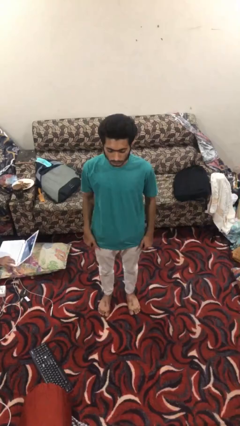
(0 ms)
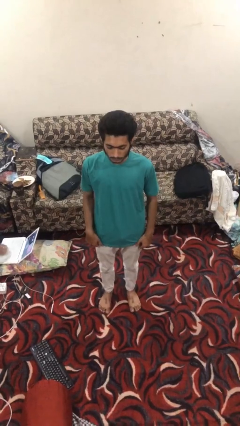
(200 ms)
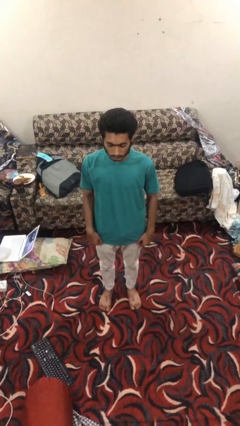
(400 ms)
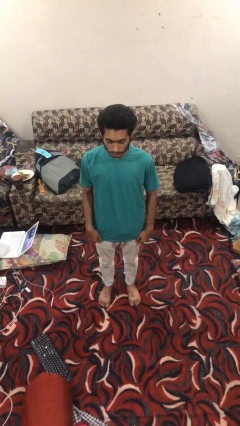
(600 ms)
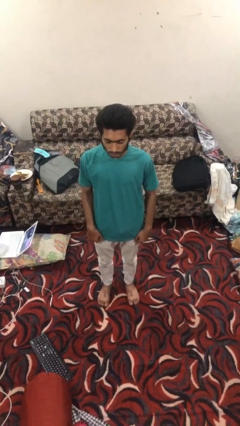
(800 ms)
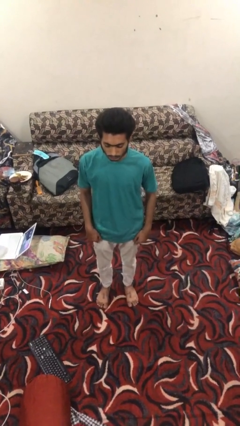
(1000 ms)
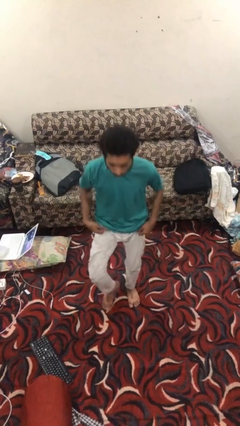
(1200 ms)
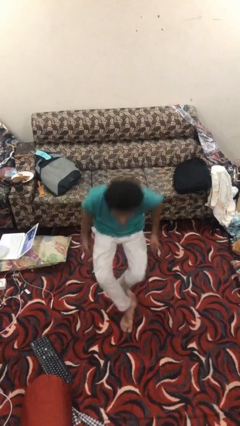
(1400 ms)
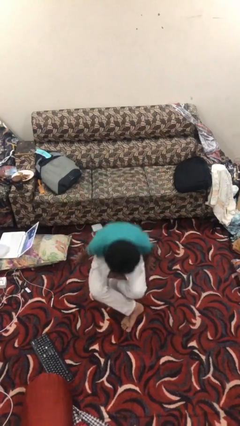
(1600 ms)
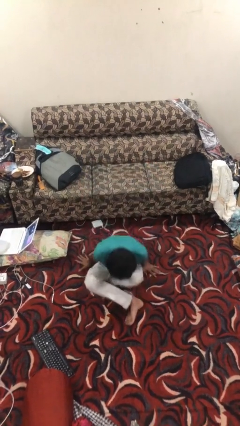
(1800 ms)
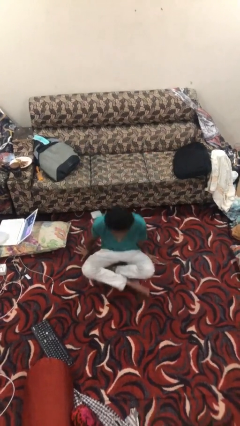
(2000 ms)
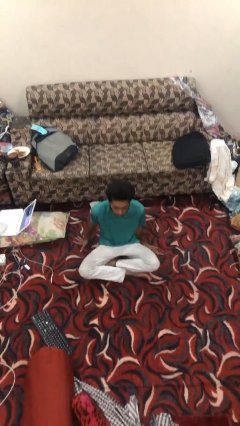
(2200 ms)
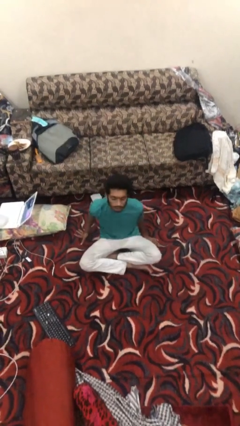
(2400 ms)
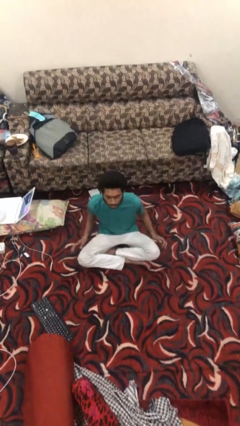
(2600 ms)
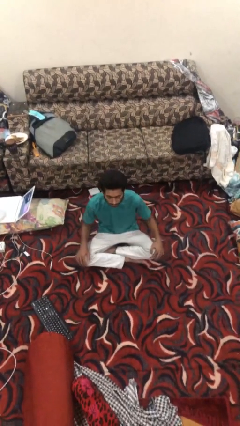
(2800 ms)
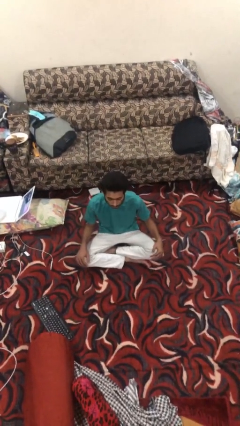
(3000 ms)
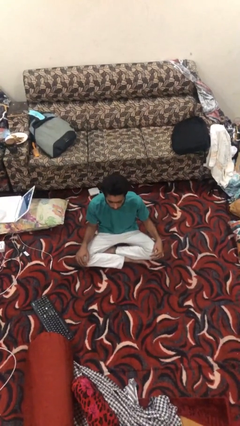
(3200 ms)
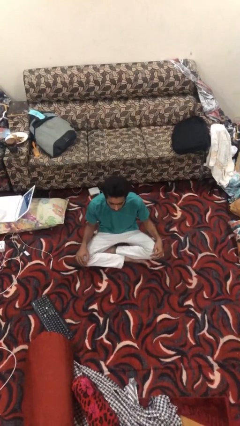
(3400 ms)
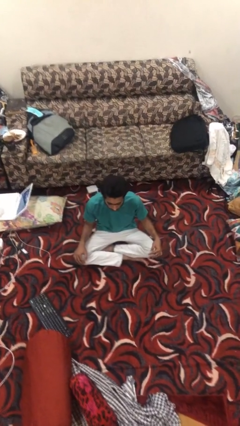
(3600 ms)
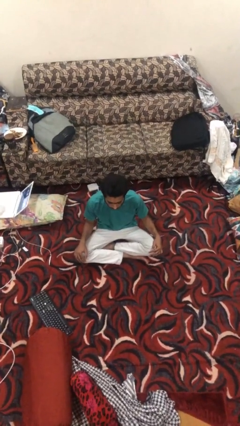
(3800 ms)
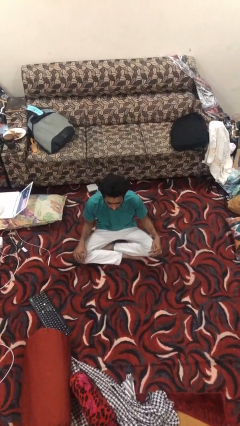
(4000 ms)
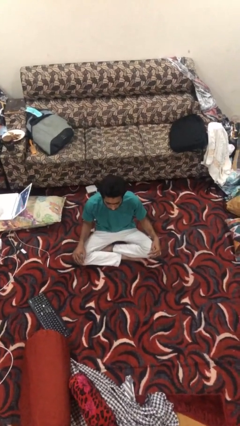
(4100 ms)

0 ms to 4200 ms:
person sits crisscross

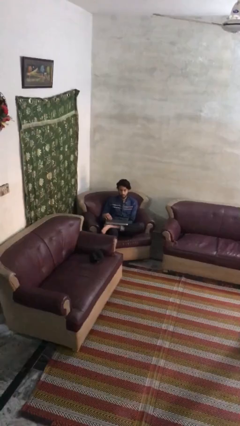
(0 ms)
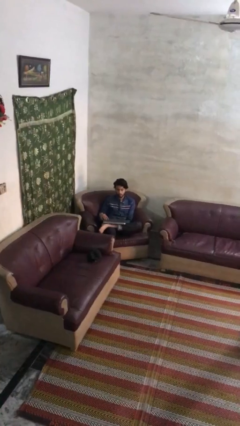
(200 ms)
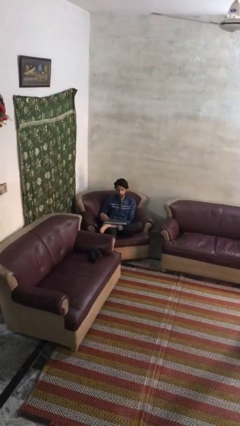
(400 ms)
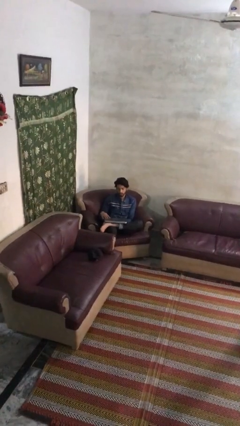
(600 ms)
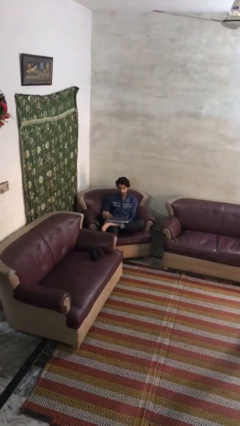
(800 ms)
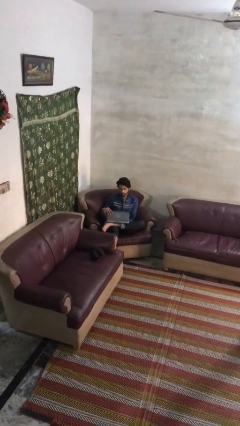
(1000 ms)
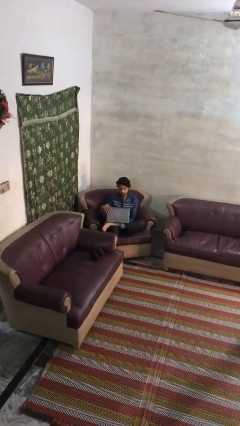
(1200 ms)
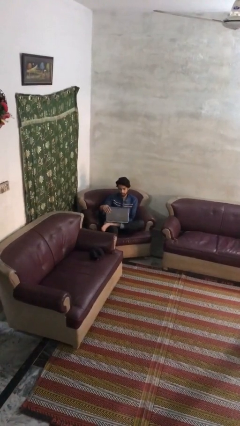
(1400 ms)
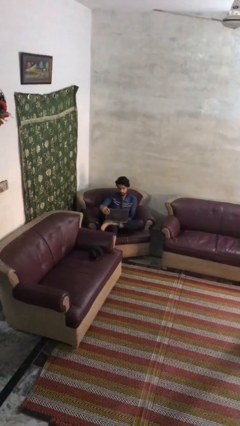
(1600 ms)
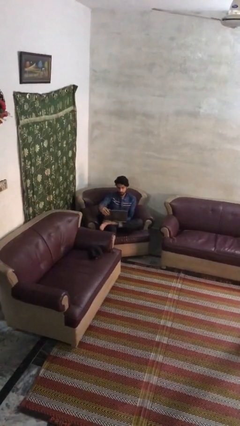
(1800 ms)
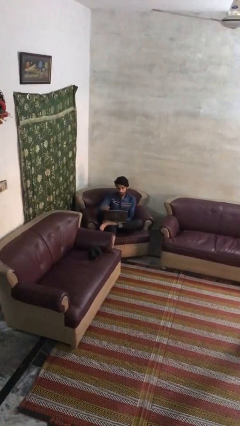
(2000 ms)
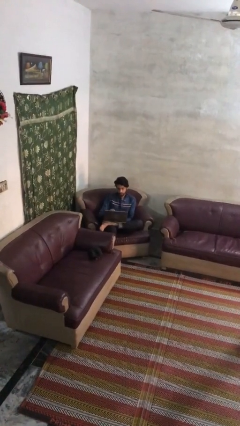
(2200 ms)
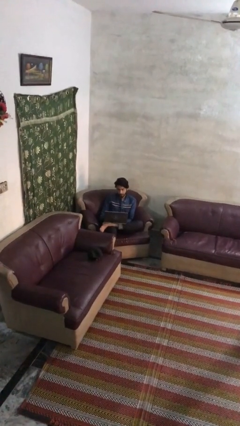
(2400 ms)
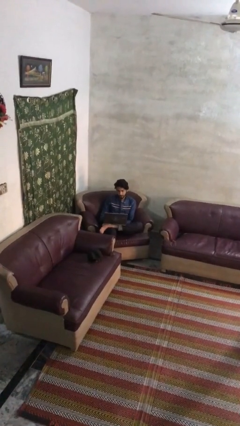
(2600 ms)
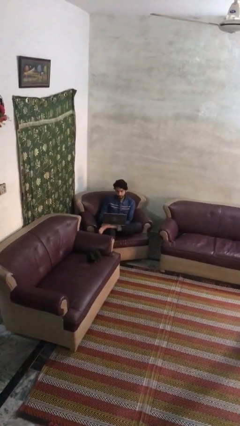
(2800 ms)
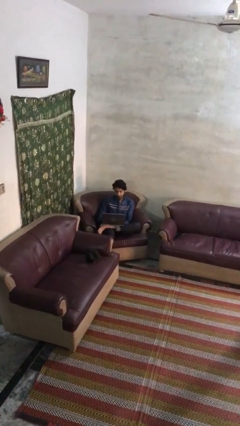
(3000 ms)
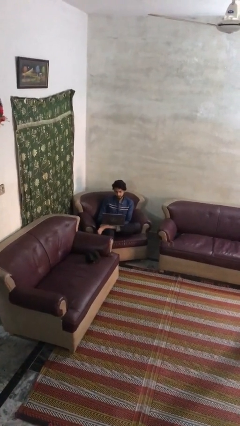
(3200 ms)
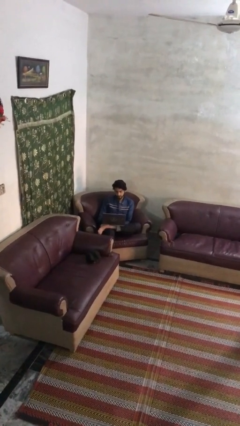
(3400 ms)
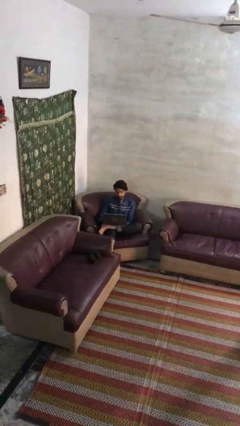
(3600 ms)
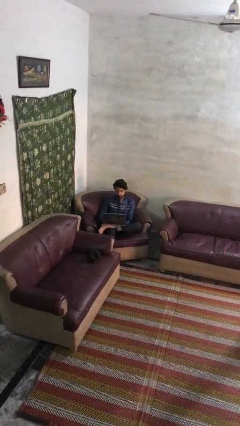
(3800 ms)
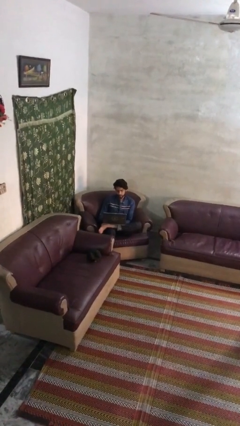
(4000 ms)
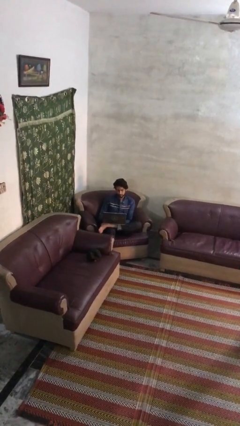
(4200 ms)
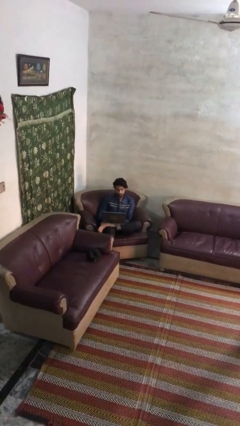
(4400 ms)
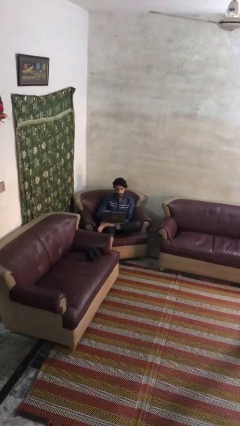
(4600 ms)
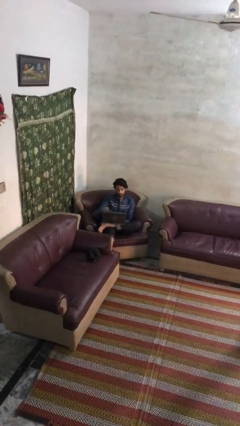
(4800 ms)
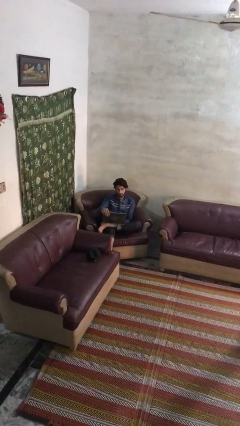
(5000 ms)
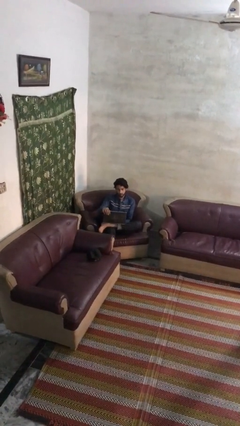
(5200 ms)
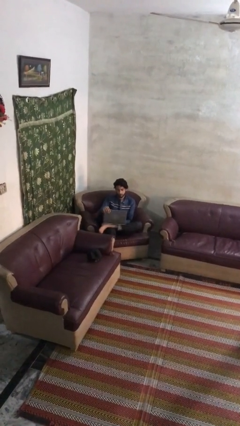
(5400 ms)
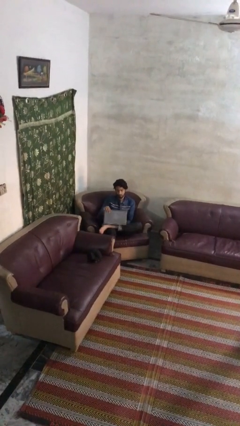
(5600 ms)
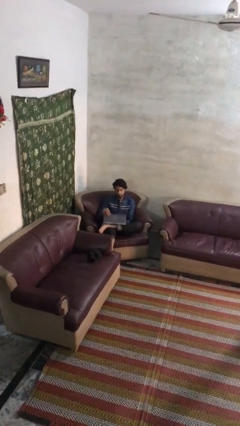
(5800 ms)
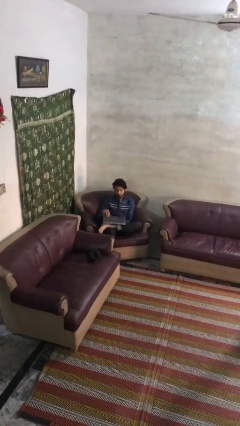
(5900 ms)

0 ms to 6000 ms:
person interacts with laptop

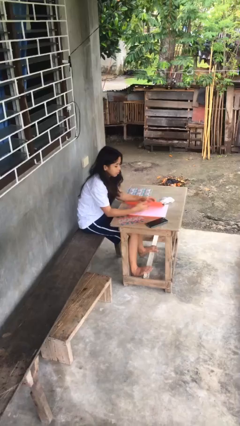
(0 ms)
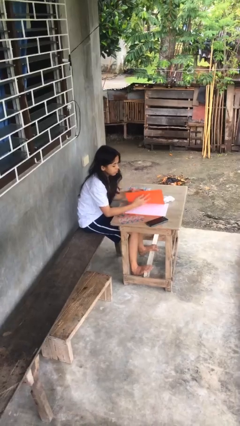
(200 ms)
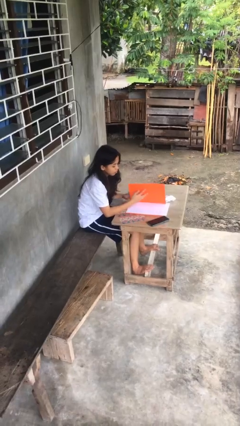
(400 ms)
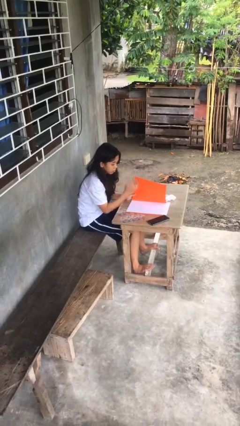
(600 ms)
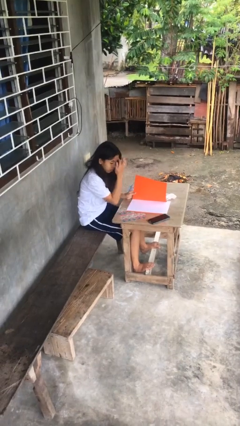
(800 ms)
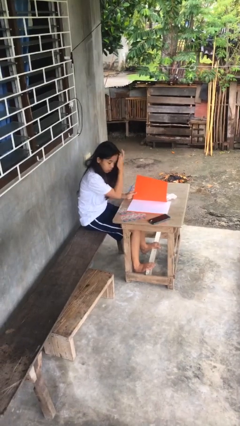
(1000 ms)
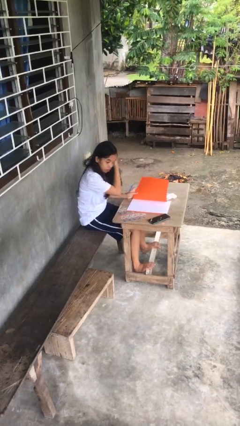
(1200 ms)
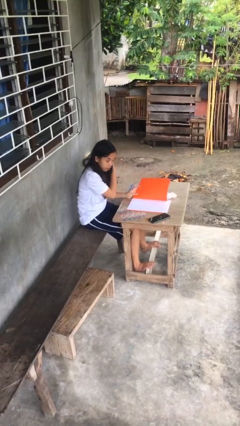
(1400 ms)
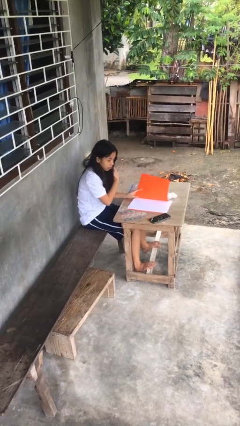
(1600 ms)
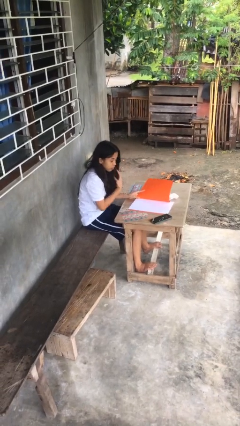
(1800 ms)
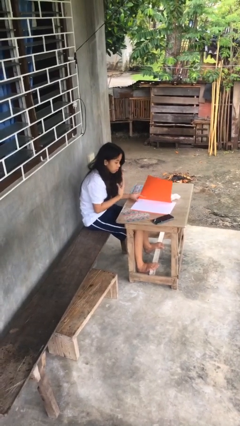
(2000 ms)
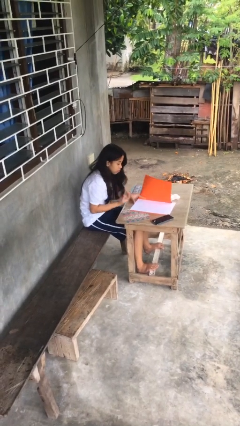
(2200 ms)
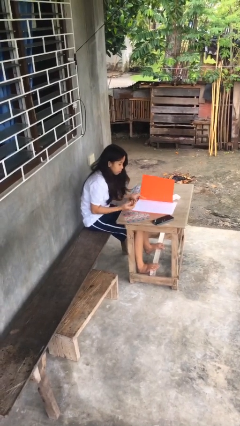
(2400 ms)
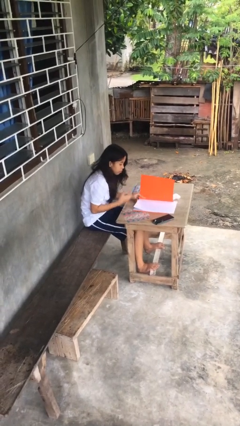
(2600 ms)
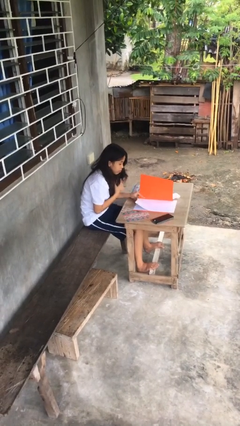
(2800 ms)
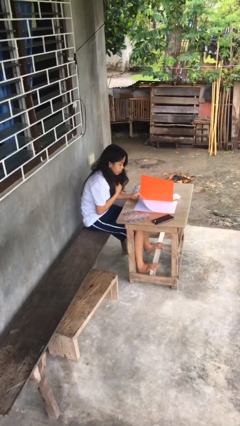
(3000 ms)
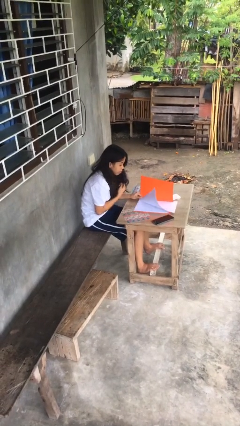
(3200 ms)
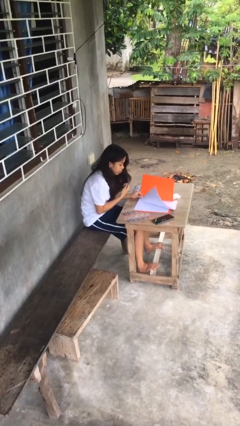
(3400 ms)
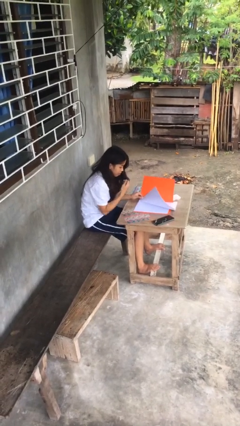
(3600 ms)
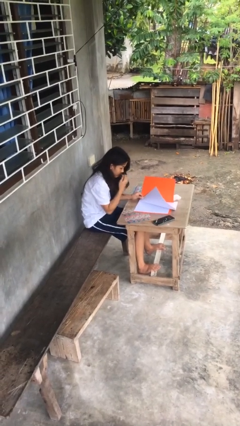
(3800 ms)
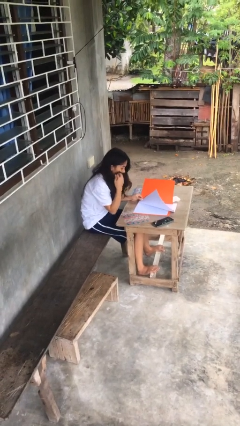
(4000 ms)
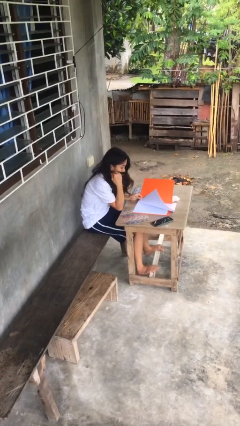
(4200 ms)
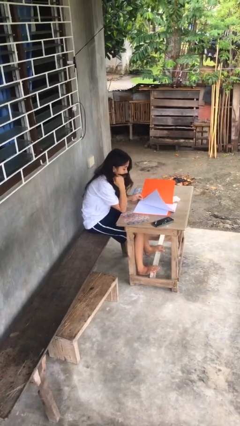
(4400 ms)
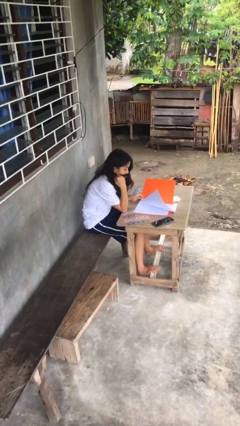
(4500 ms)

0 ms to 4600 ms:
person reads document

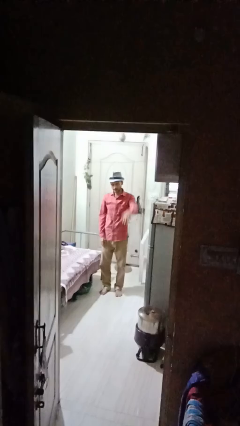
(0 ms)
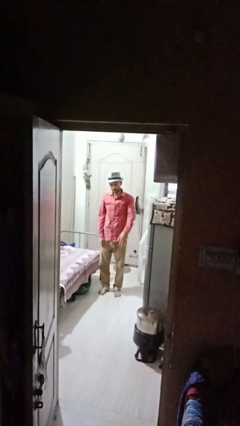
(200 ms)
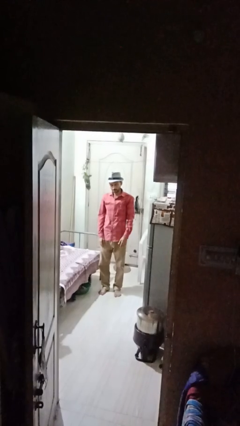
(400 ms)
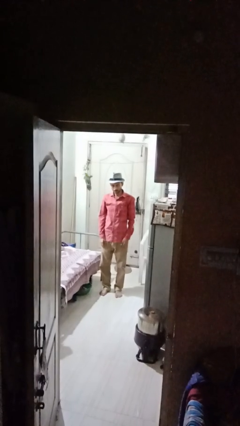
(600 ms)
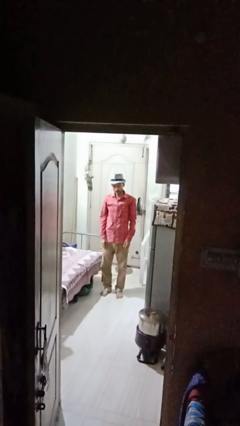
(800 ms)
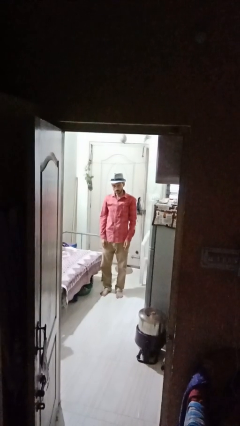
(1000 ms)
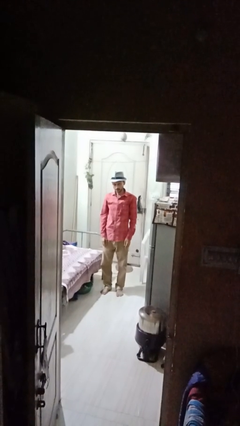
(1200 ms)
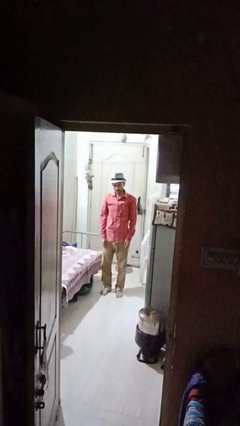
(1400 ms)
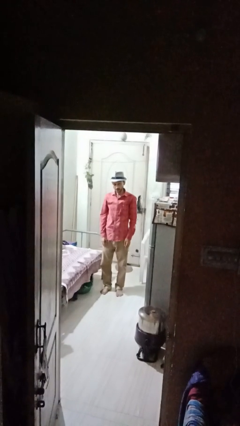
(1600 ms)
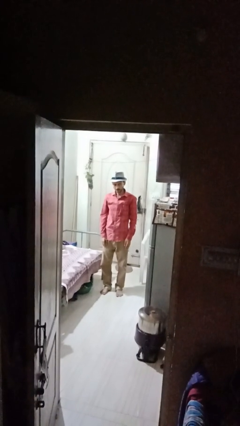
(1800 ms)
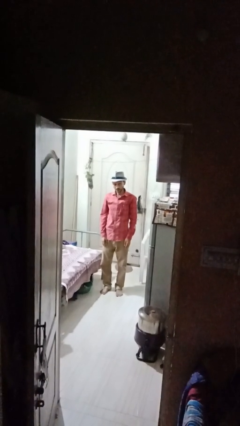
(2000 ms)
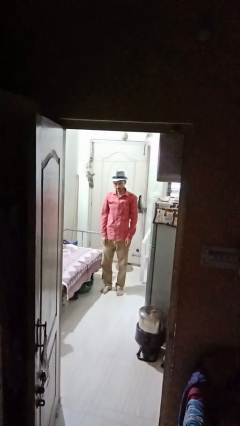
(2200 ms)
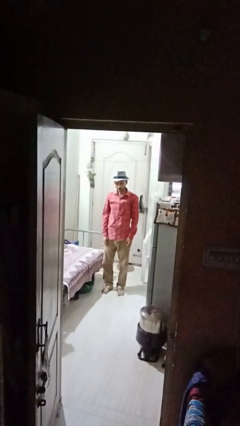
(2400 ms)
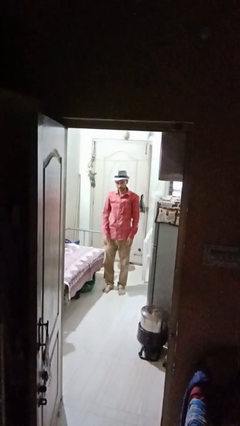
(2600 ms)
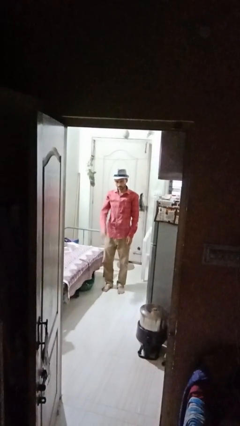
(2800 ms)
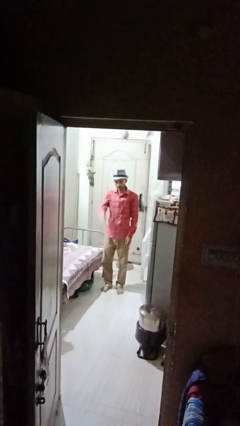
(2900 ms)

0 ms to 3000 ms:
person gestures lower hand
